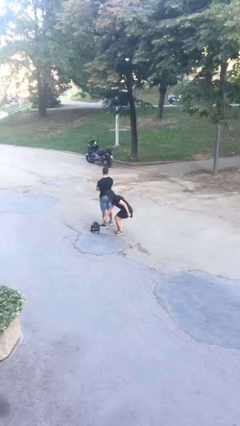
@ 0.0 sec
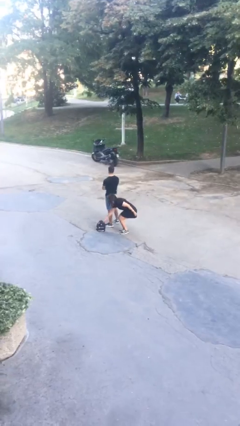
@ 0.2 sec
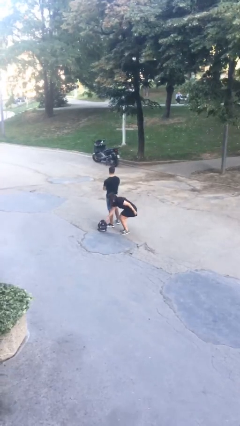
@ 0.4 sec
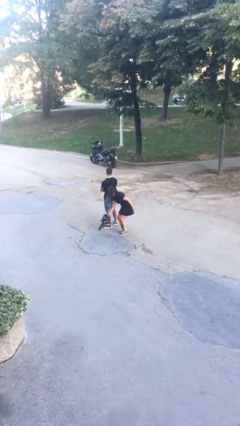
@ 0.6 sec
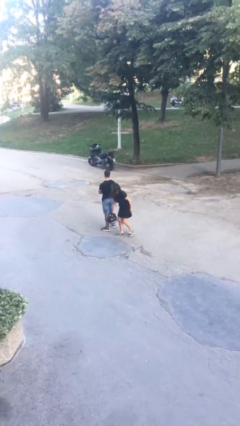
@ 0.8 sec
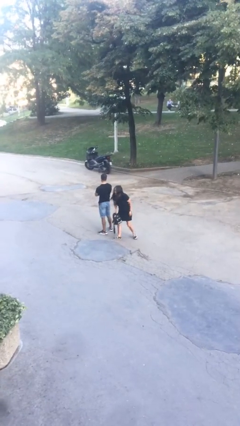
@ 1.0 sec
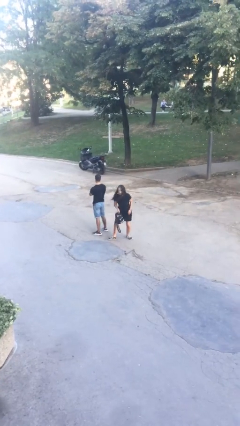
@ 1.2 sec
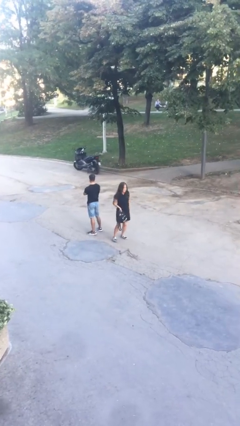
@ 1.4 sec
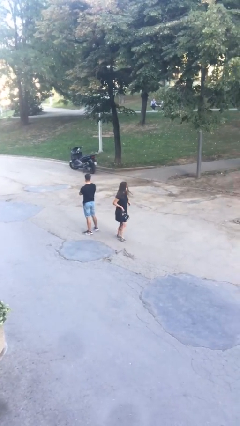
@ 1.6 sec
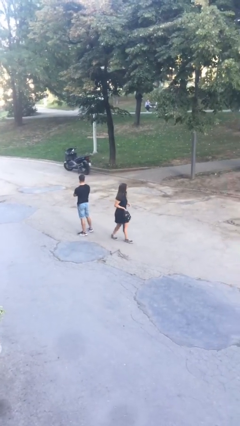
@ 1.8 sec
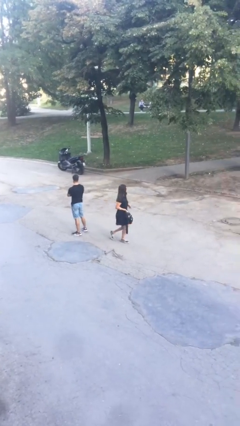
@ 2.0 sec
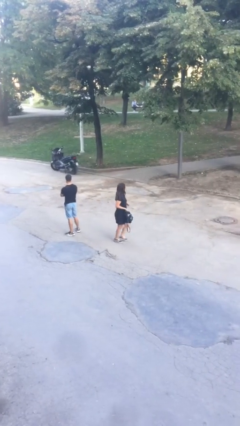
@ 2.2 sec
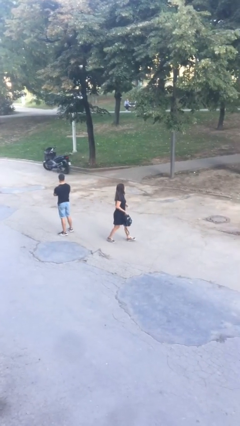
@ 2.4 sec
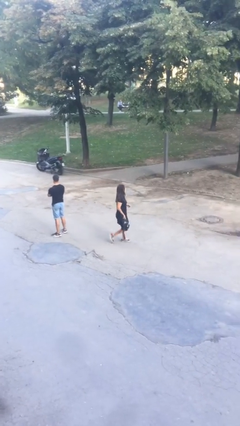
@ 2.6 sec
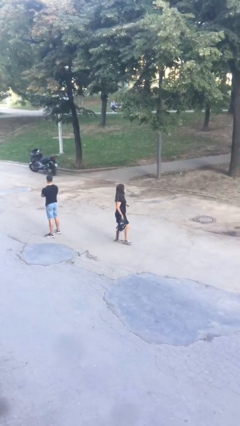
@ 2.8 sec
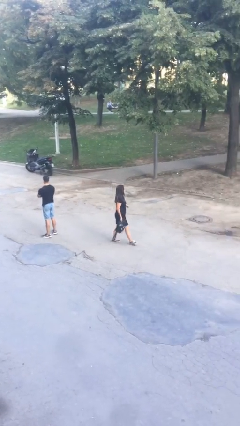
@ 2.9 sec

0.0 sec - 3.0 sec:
person steals object from person

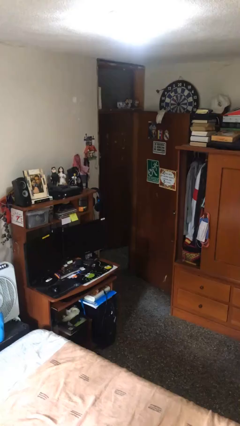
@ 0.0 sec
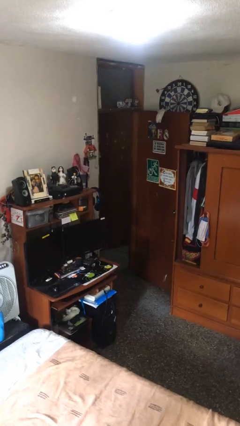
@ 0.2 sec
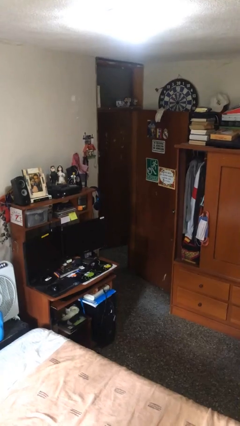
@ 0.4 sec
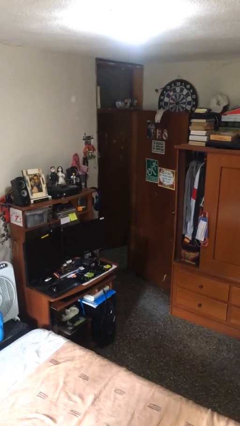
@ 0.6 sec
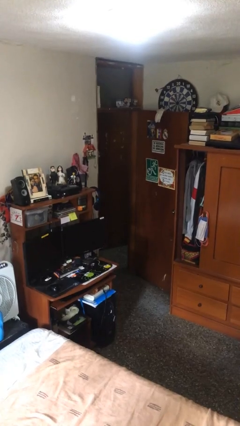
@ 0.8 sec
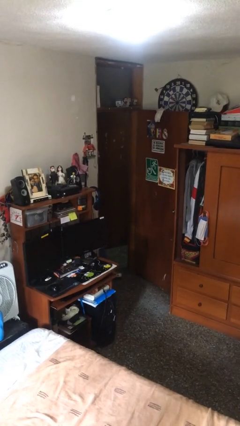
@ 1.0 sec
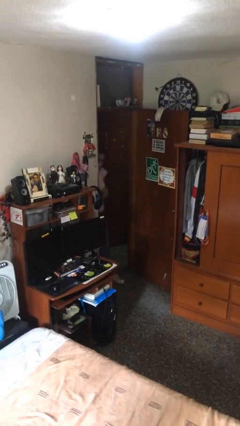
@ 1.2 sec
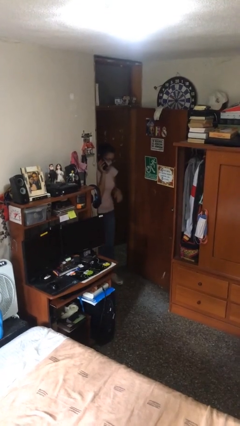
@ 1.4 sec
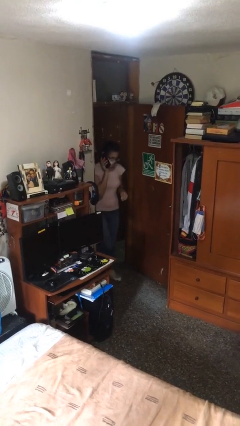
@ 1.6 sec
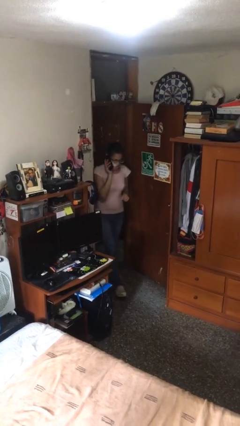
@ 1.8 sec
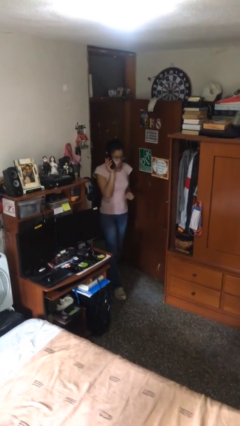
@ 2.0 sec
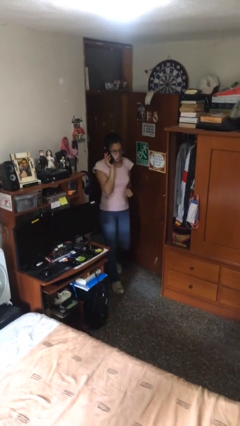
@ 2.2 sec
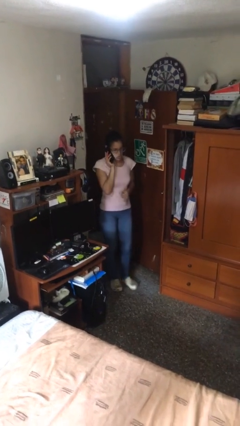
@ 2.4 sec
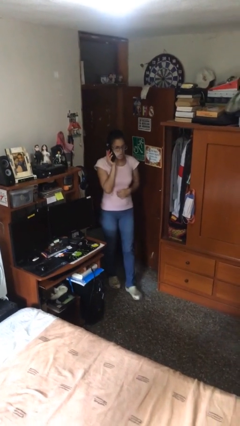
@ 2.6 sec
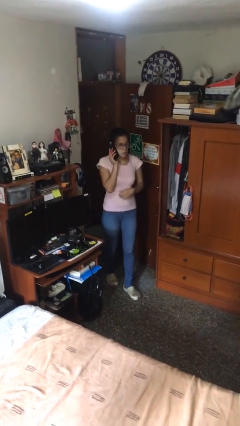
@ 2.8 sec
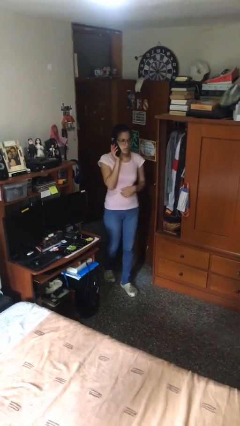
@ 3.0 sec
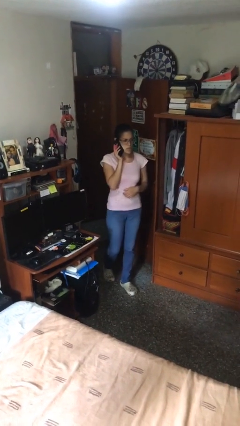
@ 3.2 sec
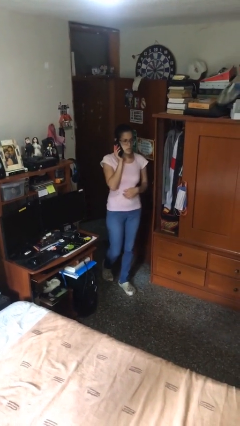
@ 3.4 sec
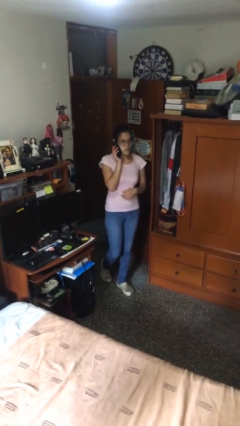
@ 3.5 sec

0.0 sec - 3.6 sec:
person enters scene through structure

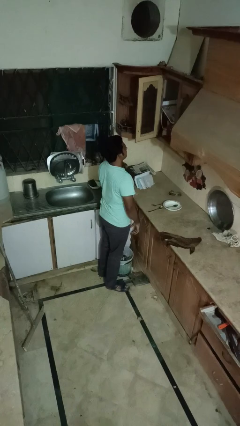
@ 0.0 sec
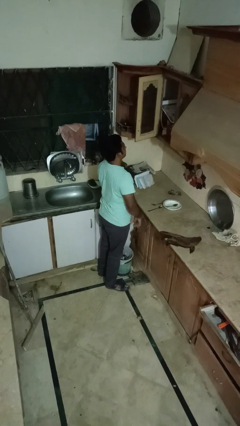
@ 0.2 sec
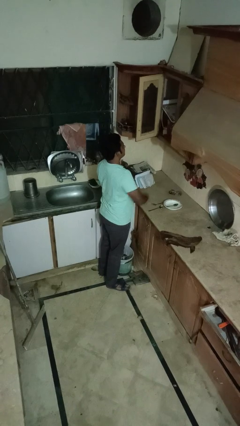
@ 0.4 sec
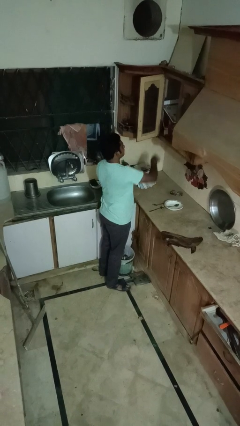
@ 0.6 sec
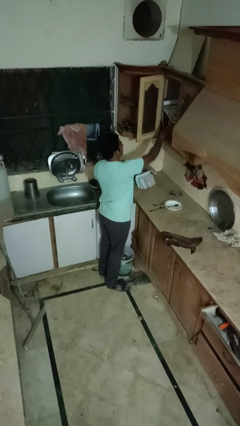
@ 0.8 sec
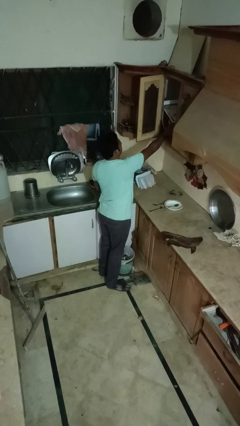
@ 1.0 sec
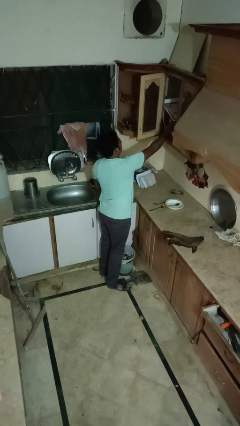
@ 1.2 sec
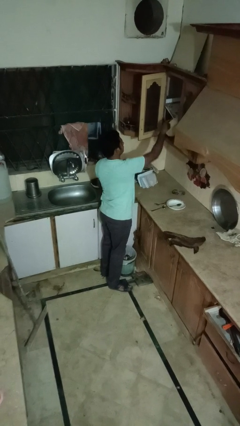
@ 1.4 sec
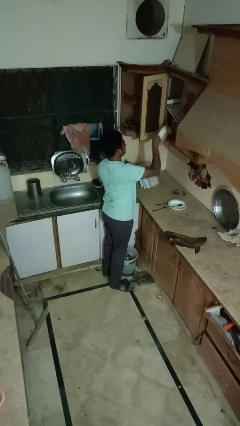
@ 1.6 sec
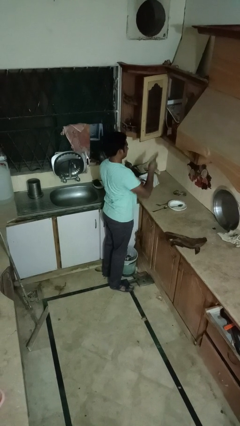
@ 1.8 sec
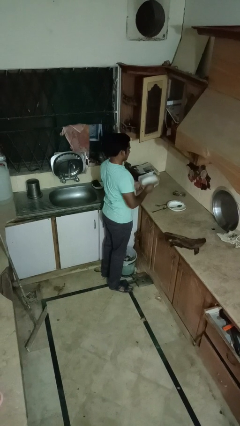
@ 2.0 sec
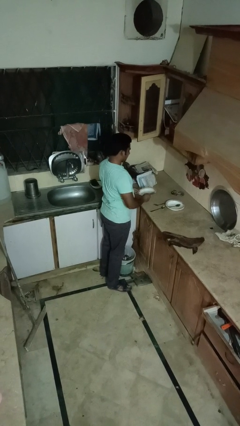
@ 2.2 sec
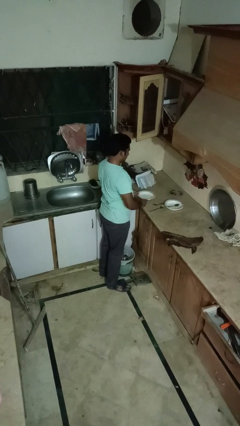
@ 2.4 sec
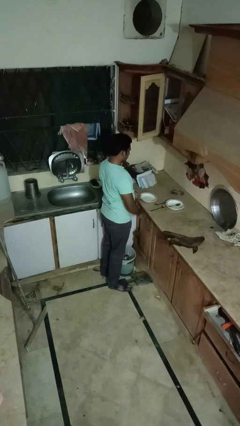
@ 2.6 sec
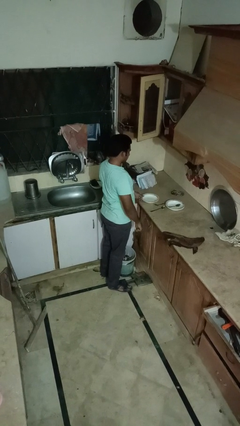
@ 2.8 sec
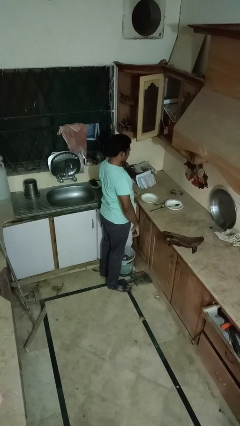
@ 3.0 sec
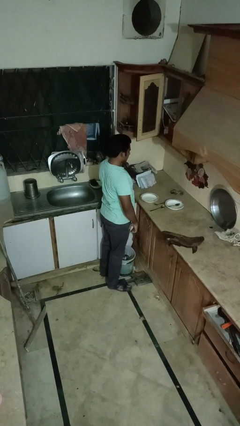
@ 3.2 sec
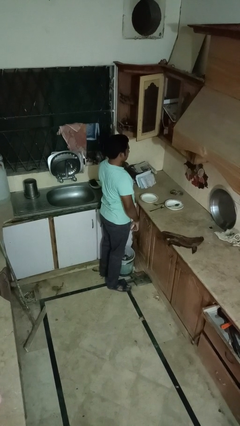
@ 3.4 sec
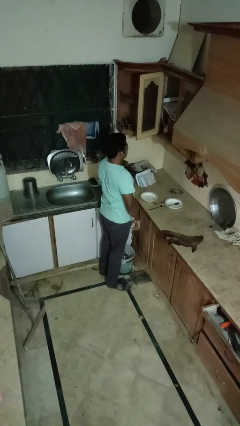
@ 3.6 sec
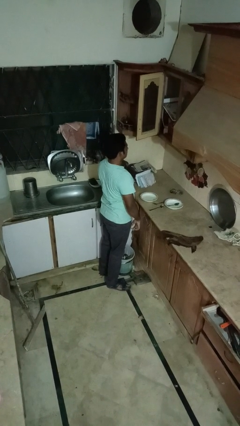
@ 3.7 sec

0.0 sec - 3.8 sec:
person takes object from cabinet

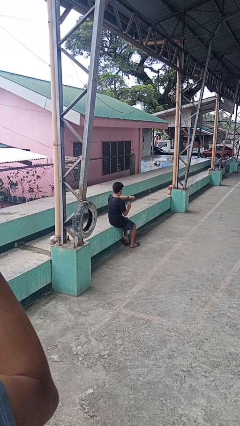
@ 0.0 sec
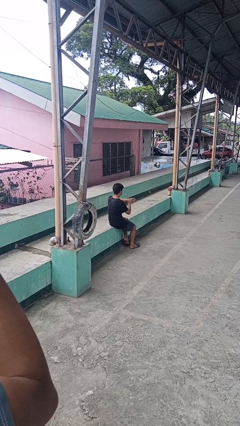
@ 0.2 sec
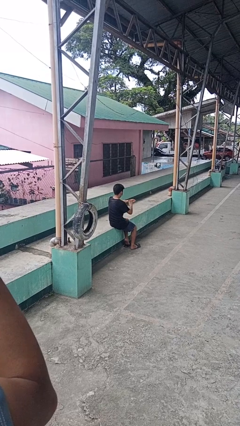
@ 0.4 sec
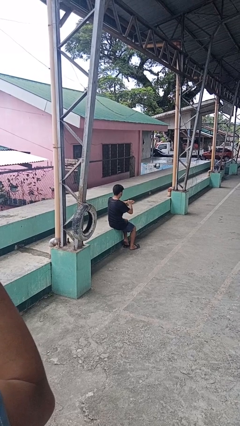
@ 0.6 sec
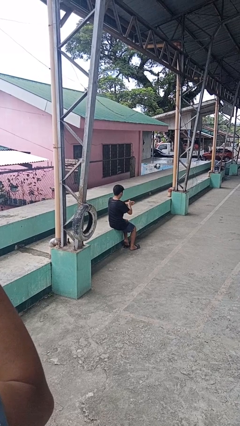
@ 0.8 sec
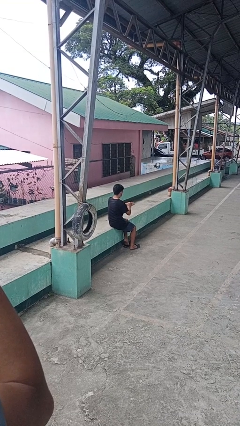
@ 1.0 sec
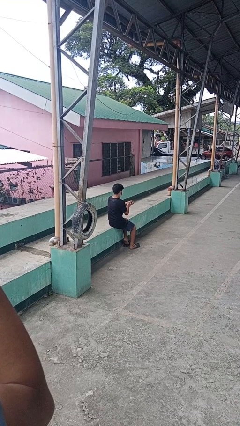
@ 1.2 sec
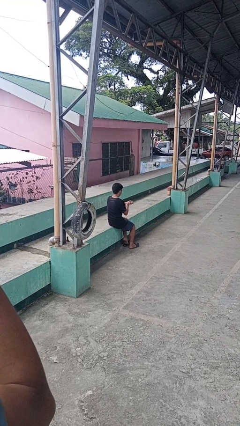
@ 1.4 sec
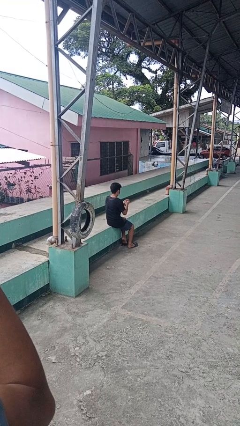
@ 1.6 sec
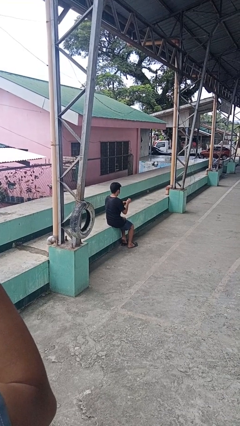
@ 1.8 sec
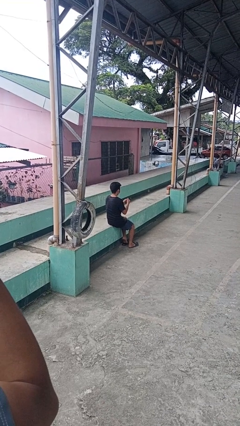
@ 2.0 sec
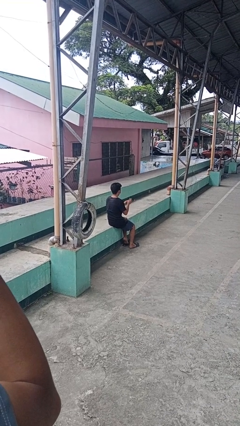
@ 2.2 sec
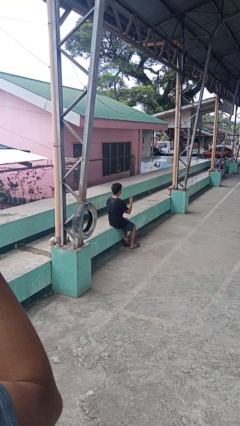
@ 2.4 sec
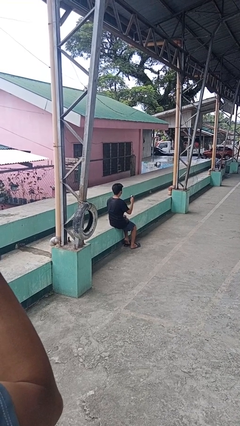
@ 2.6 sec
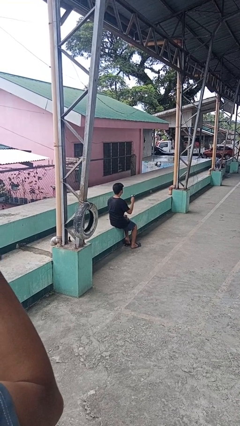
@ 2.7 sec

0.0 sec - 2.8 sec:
person takes off wristwatch

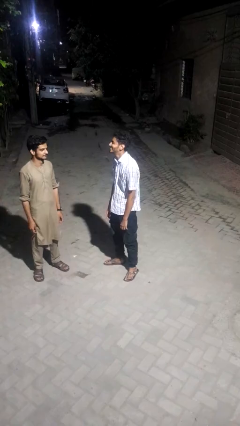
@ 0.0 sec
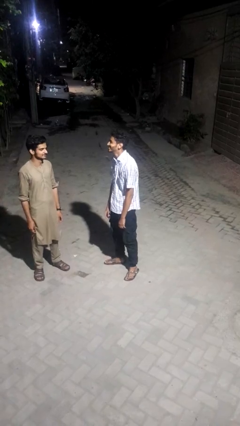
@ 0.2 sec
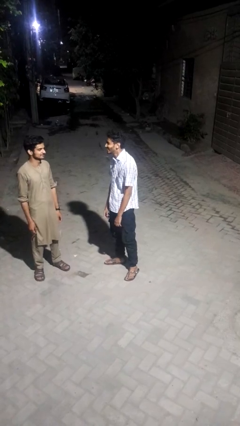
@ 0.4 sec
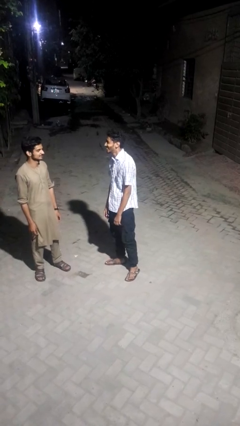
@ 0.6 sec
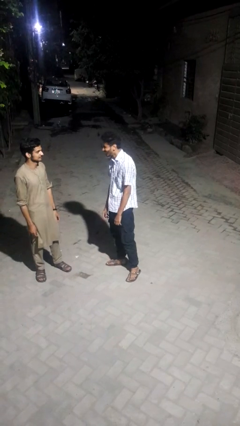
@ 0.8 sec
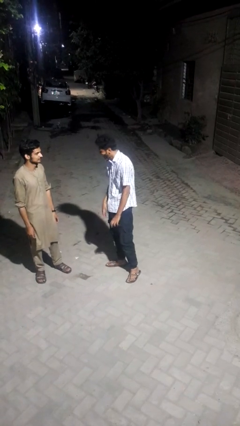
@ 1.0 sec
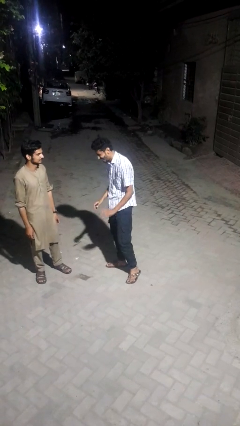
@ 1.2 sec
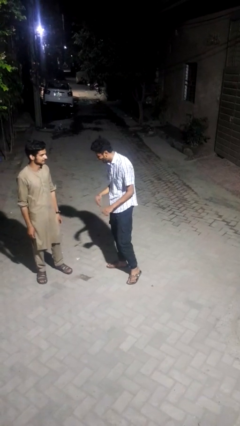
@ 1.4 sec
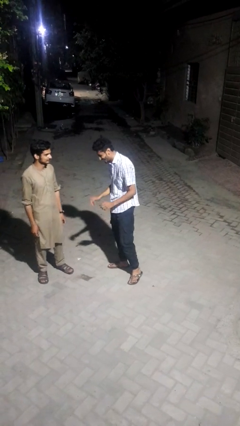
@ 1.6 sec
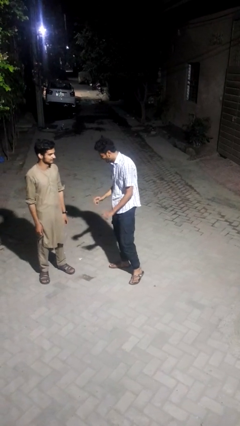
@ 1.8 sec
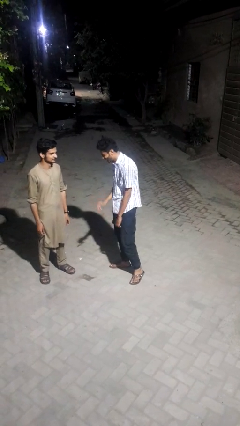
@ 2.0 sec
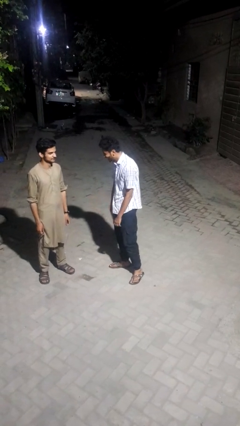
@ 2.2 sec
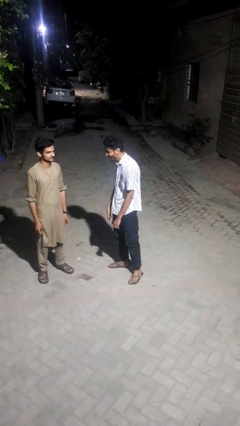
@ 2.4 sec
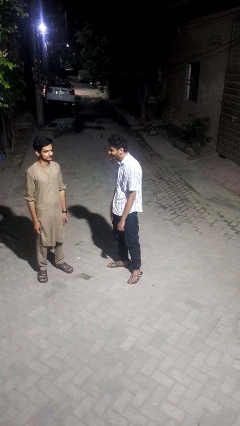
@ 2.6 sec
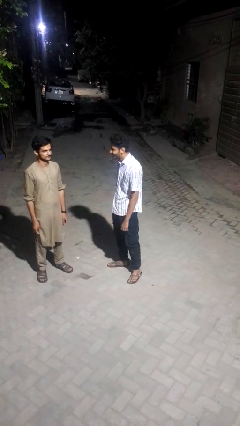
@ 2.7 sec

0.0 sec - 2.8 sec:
person laughs with person

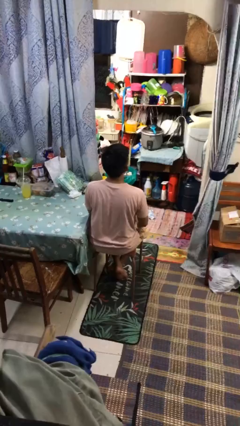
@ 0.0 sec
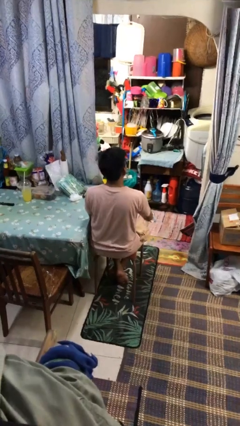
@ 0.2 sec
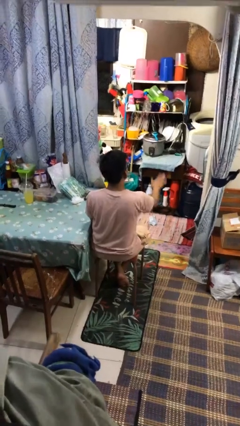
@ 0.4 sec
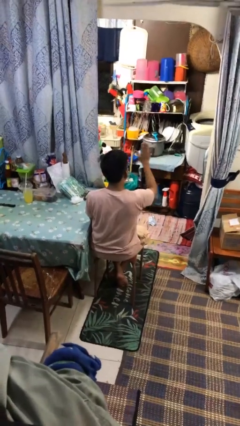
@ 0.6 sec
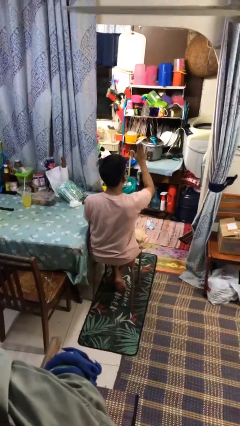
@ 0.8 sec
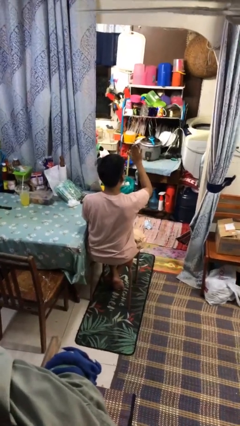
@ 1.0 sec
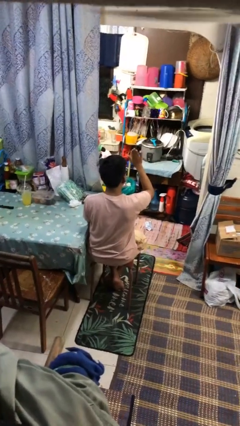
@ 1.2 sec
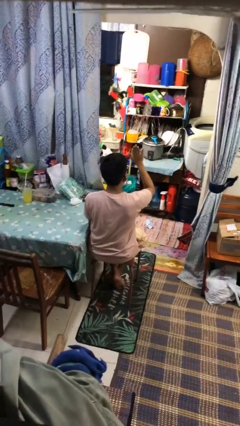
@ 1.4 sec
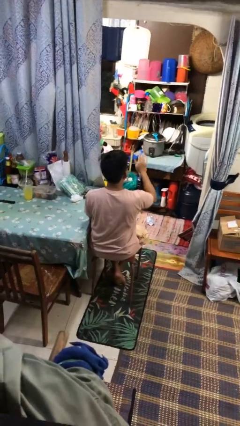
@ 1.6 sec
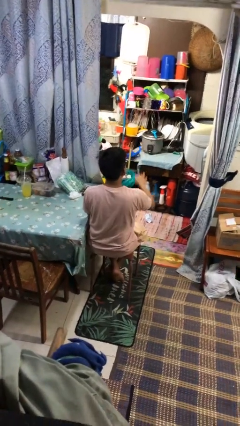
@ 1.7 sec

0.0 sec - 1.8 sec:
person gestures stop
